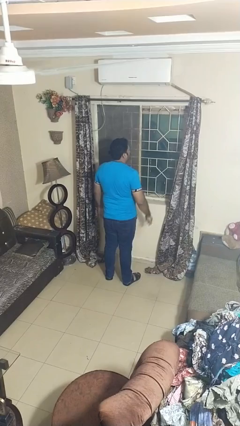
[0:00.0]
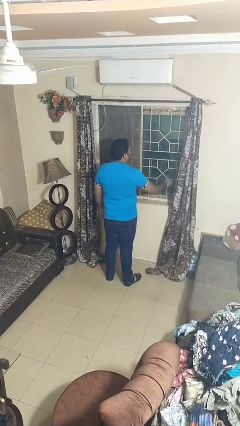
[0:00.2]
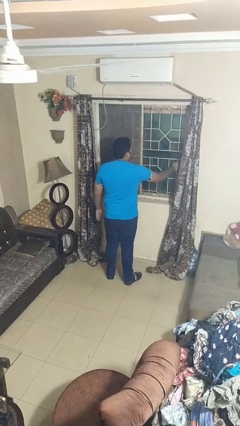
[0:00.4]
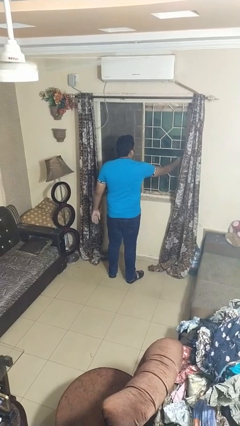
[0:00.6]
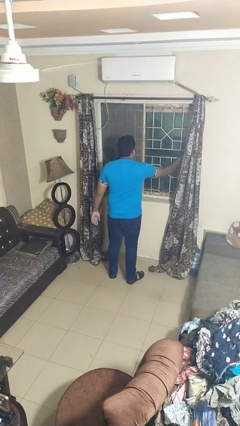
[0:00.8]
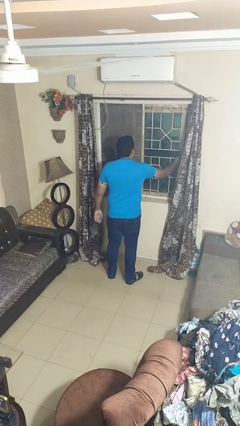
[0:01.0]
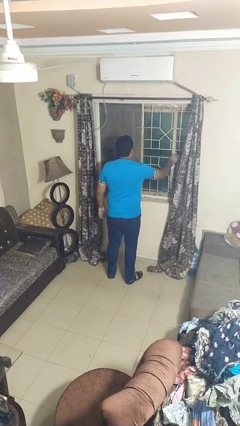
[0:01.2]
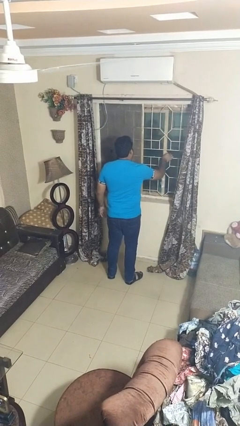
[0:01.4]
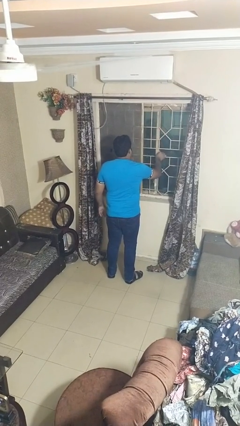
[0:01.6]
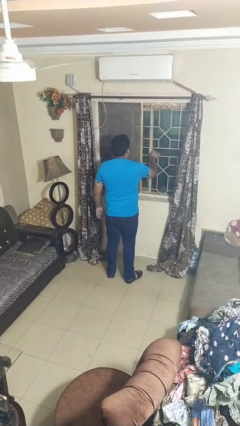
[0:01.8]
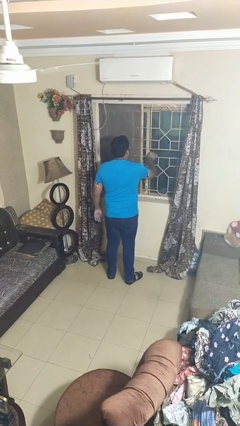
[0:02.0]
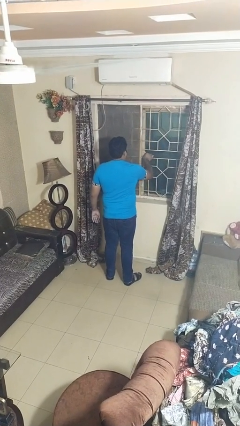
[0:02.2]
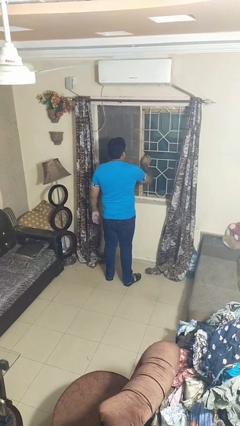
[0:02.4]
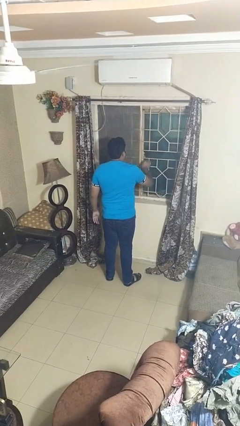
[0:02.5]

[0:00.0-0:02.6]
person closes home window

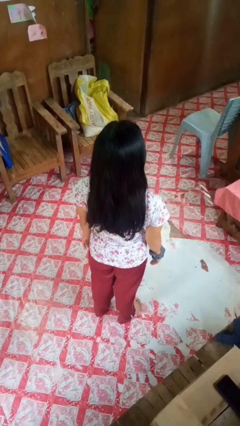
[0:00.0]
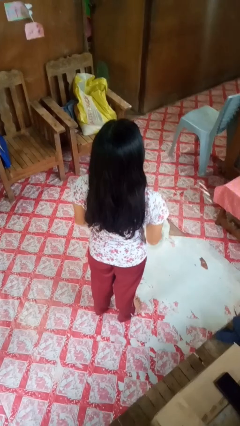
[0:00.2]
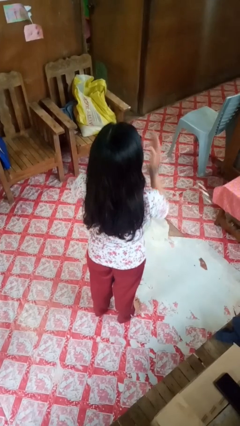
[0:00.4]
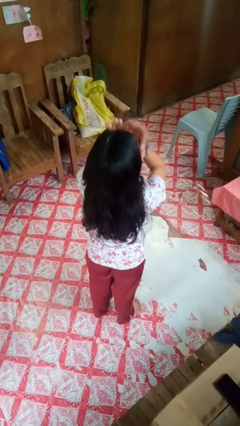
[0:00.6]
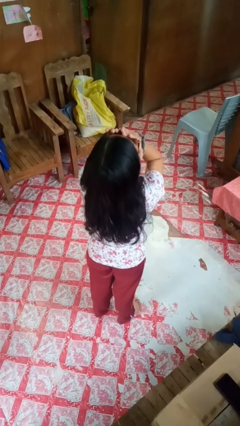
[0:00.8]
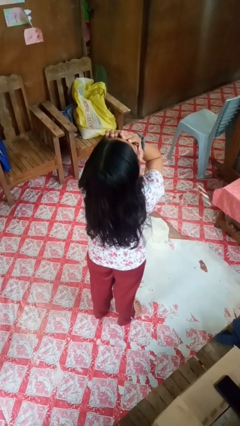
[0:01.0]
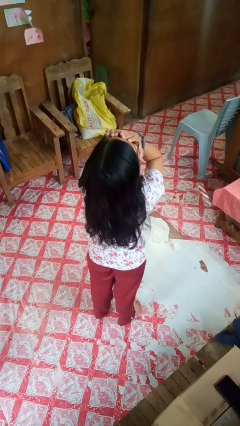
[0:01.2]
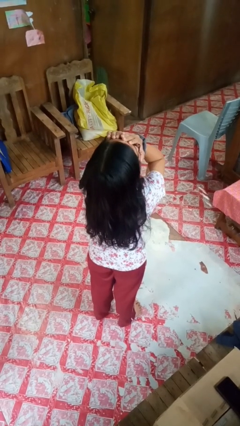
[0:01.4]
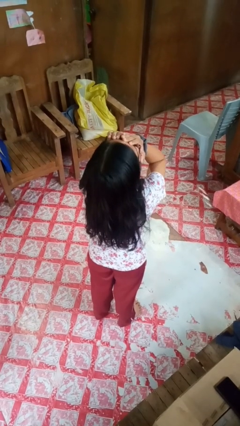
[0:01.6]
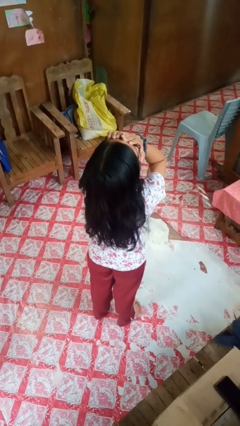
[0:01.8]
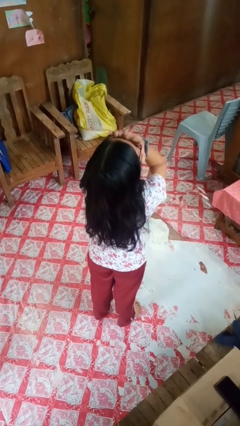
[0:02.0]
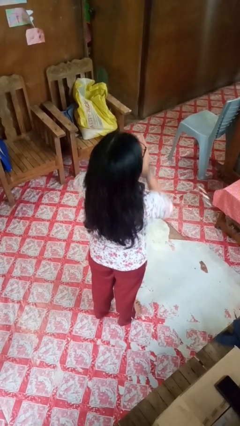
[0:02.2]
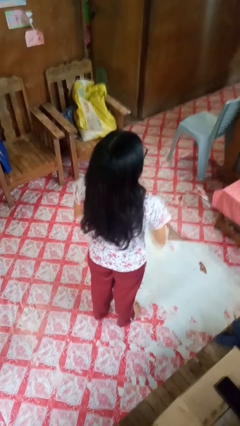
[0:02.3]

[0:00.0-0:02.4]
person covers face with hands

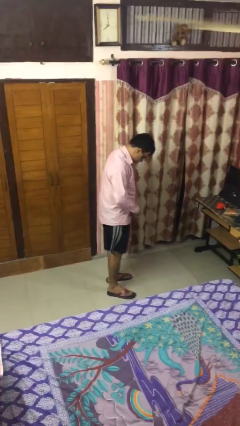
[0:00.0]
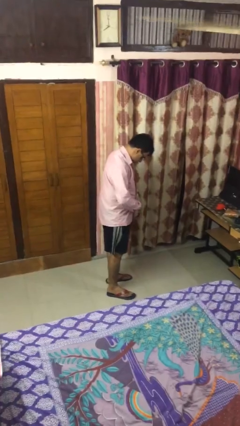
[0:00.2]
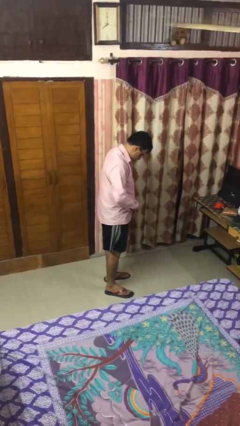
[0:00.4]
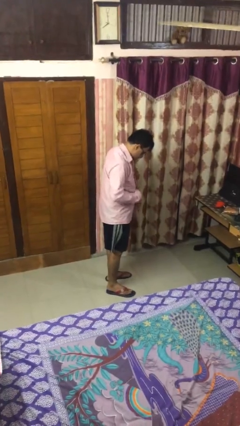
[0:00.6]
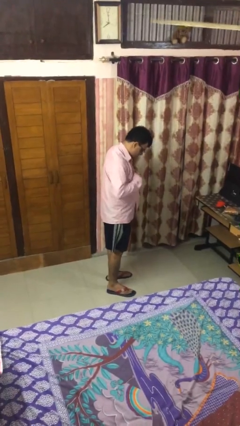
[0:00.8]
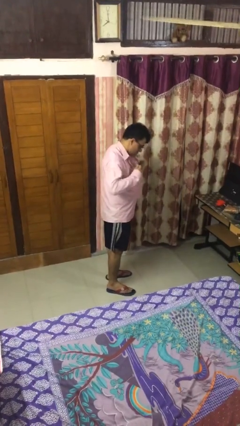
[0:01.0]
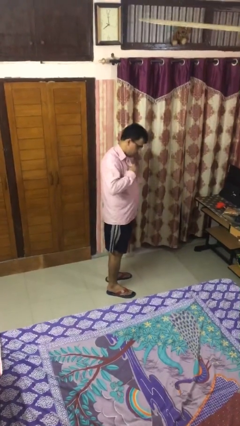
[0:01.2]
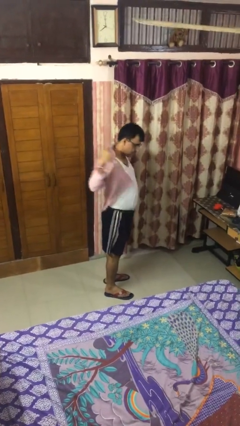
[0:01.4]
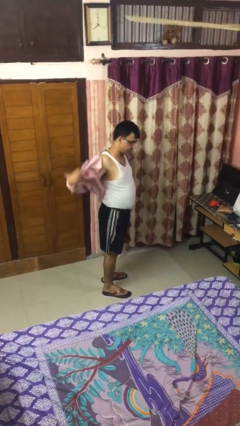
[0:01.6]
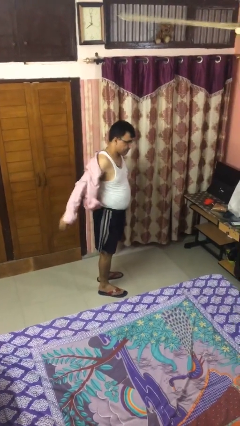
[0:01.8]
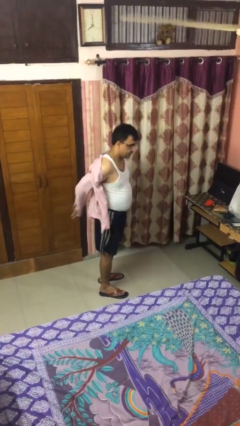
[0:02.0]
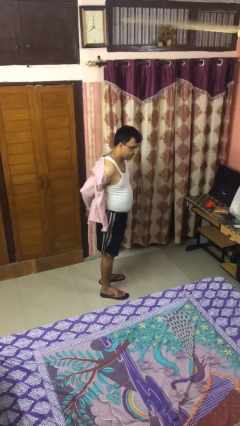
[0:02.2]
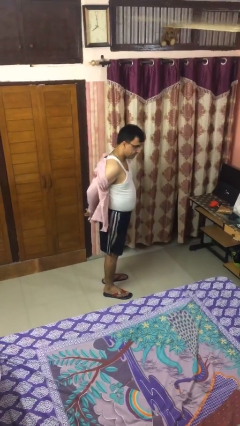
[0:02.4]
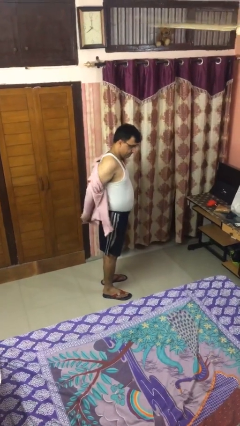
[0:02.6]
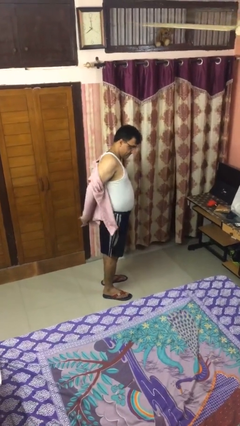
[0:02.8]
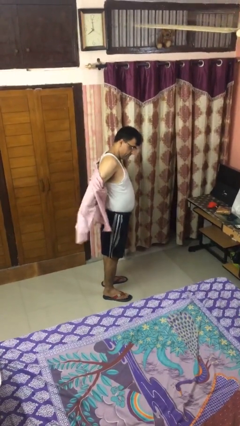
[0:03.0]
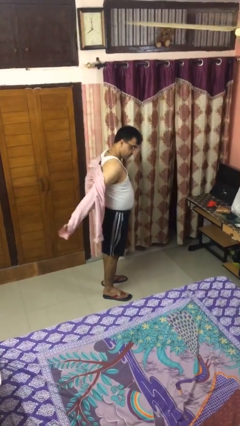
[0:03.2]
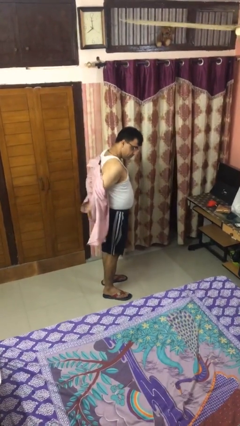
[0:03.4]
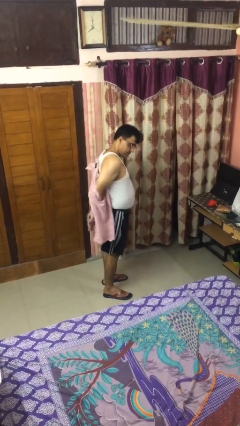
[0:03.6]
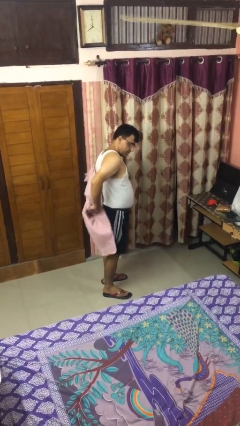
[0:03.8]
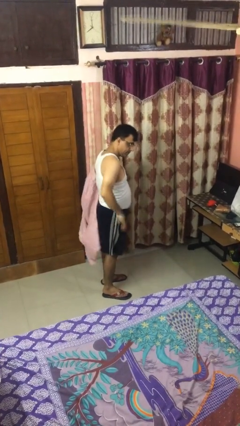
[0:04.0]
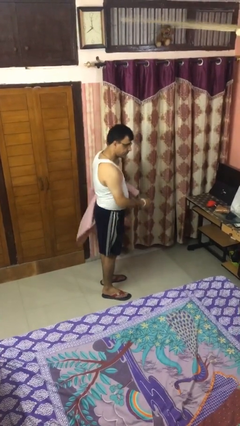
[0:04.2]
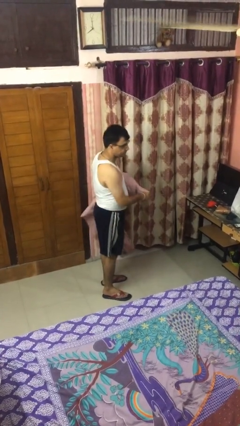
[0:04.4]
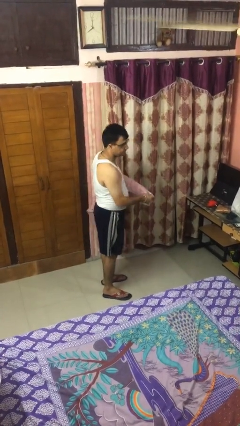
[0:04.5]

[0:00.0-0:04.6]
person takes off shirt

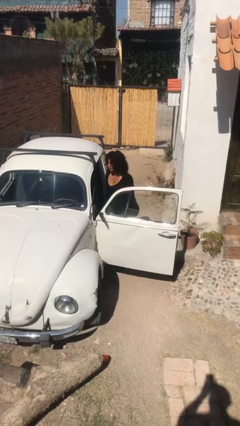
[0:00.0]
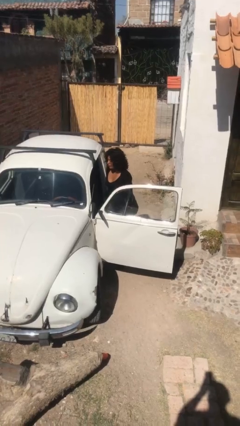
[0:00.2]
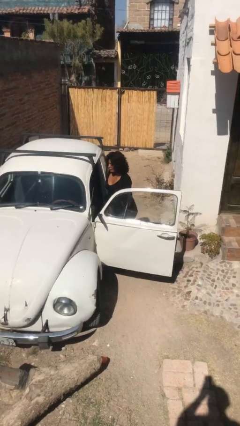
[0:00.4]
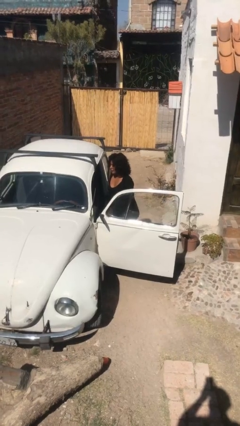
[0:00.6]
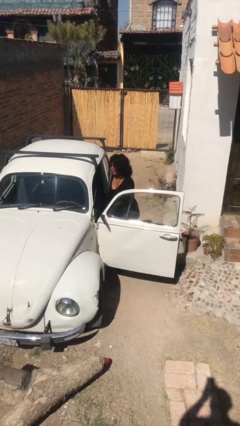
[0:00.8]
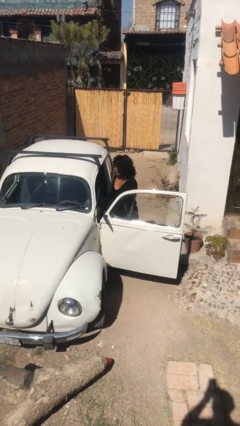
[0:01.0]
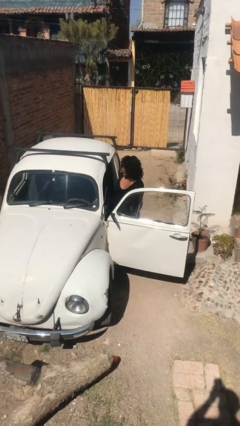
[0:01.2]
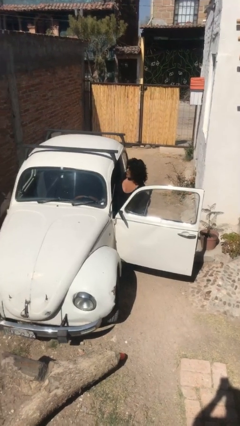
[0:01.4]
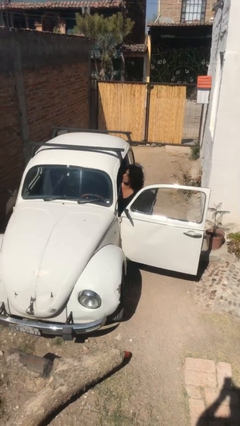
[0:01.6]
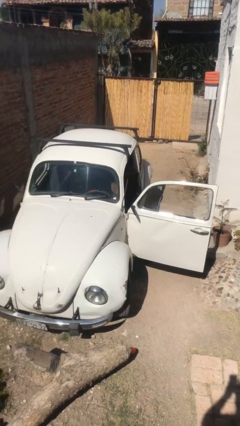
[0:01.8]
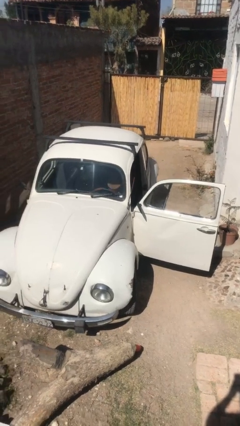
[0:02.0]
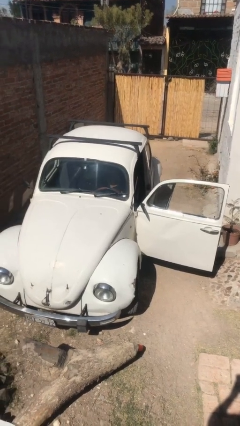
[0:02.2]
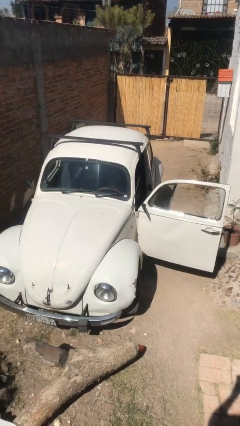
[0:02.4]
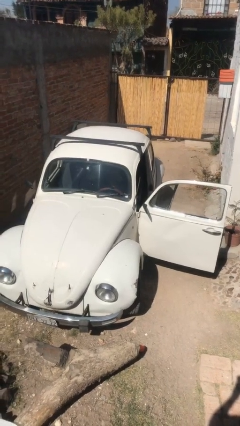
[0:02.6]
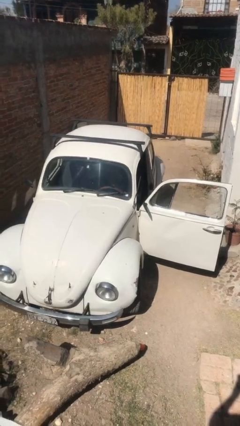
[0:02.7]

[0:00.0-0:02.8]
person enters car

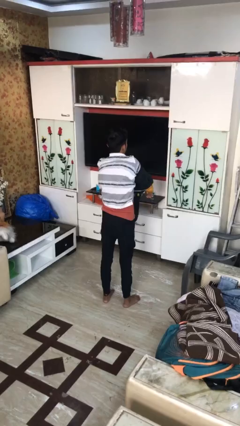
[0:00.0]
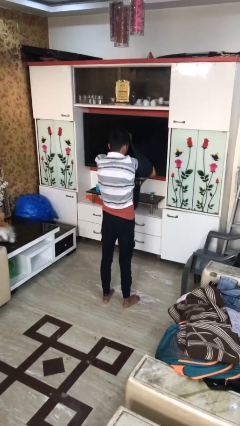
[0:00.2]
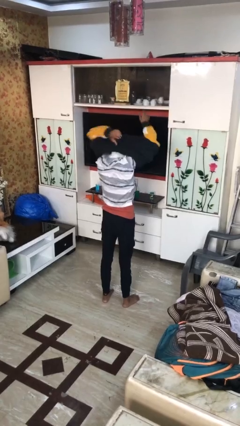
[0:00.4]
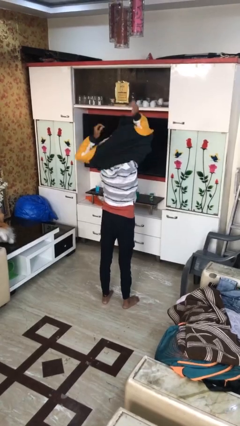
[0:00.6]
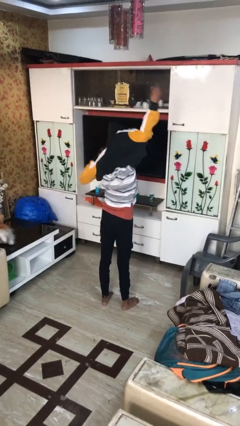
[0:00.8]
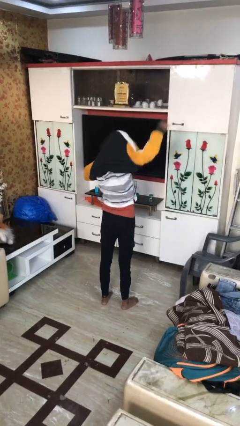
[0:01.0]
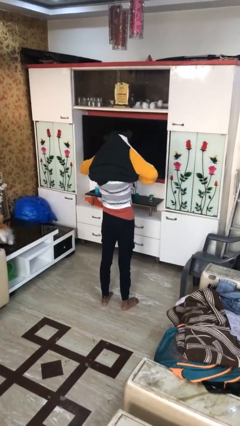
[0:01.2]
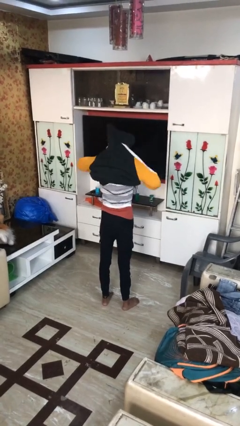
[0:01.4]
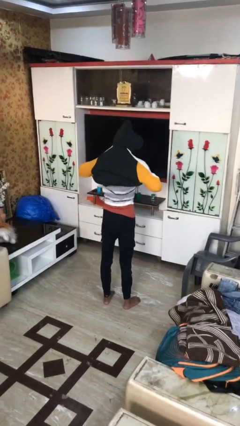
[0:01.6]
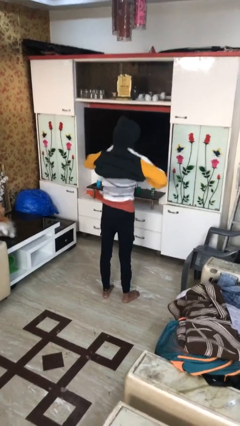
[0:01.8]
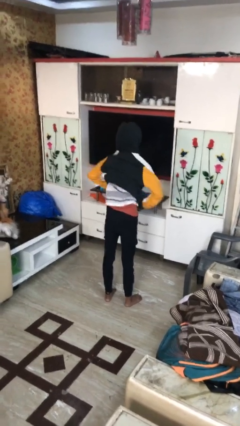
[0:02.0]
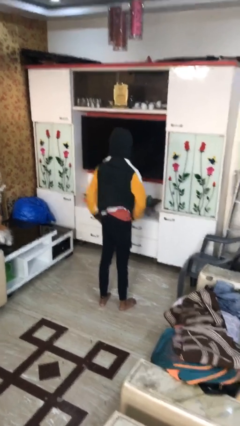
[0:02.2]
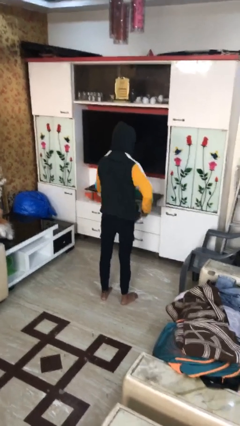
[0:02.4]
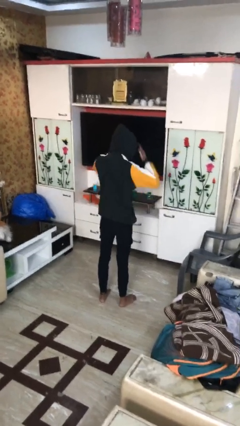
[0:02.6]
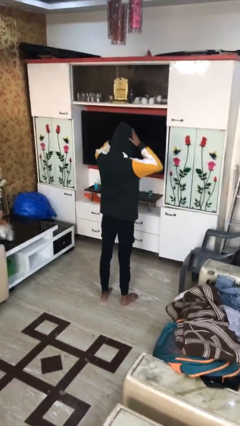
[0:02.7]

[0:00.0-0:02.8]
person puts on hoodie

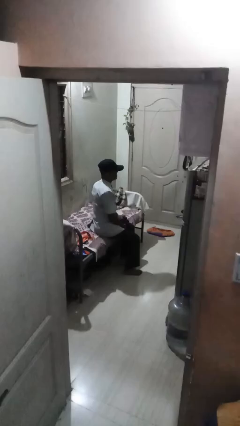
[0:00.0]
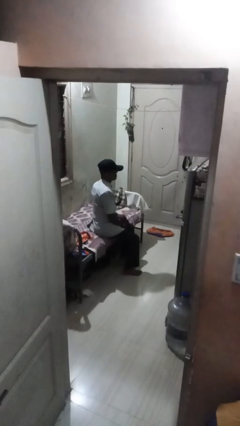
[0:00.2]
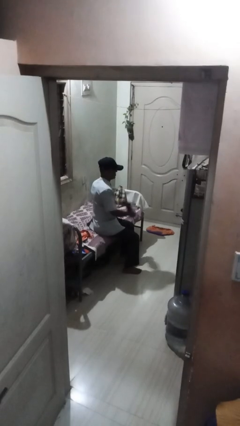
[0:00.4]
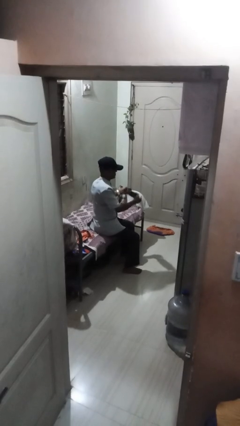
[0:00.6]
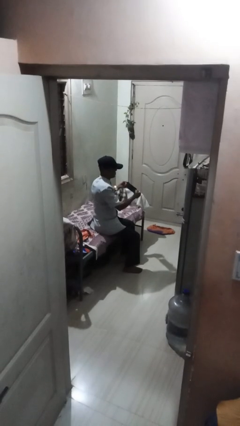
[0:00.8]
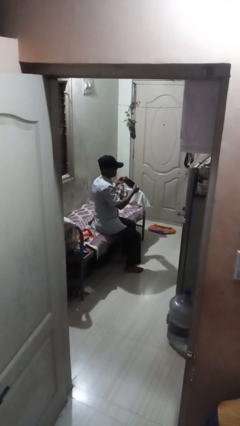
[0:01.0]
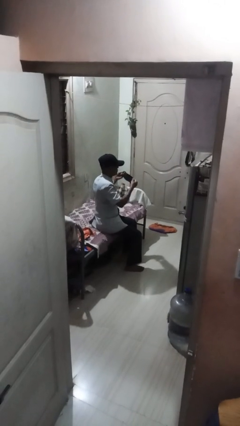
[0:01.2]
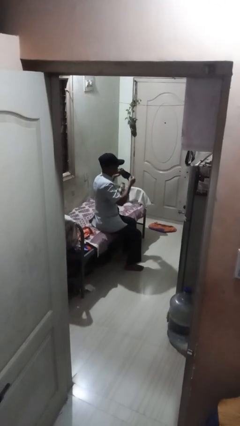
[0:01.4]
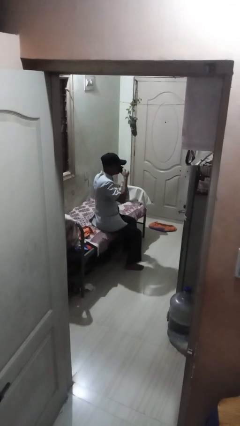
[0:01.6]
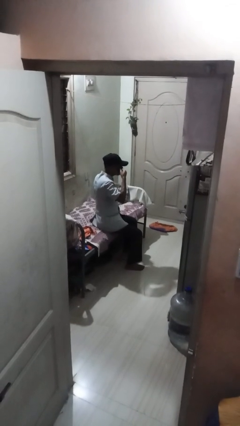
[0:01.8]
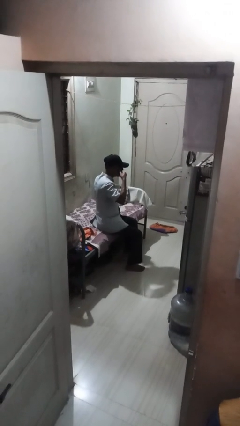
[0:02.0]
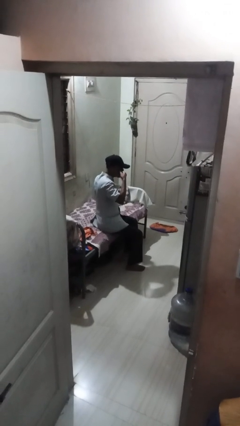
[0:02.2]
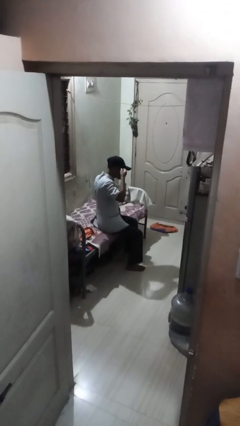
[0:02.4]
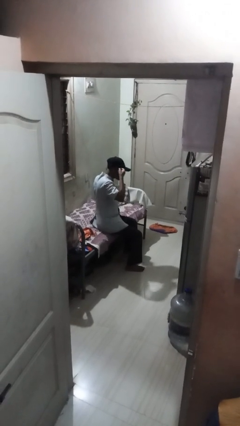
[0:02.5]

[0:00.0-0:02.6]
person puts on facemask
